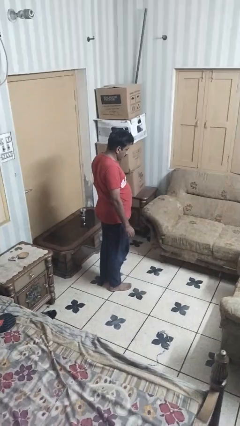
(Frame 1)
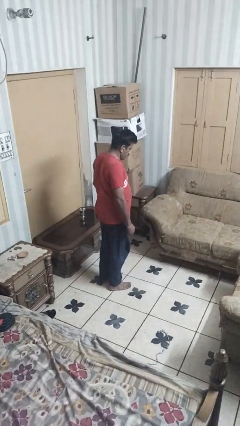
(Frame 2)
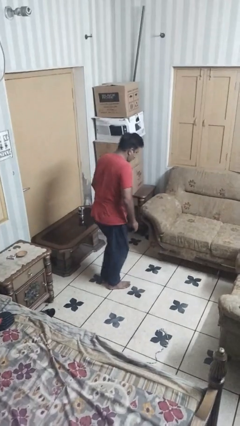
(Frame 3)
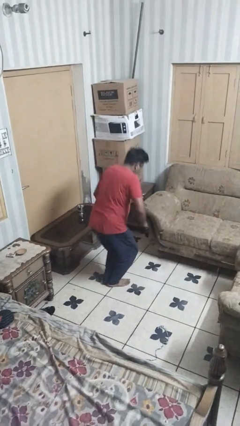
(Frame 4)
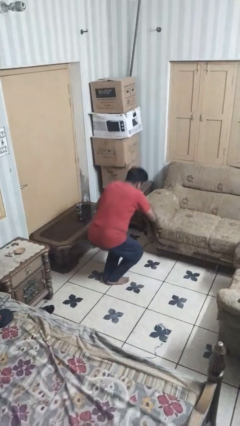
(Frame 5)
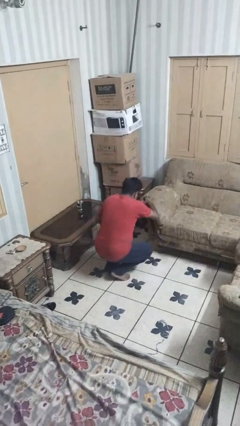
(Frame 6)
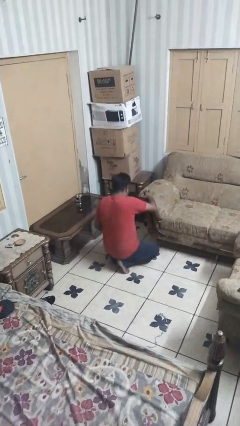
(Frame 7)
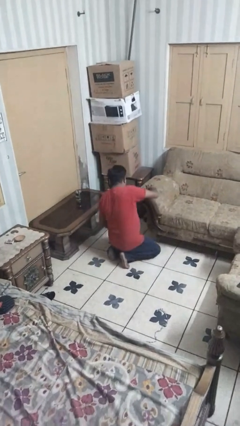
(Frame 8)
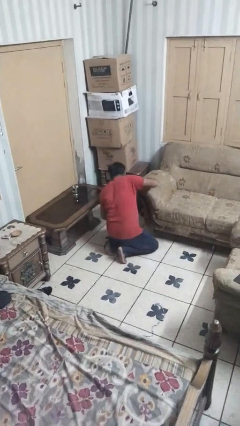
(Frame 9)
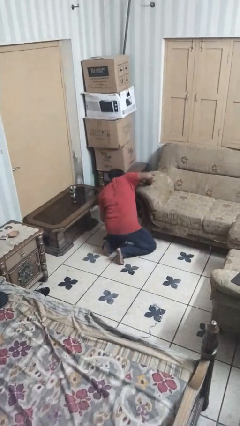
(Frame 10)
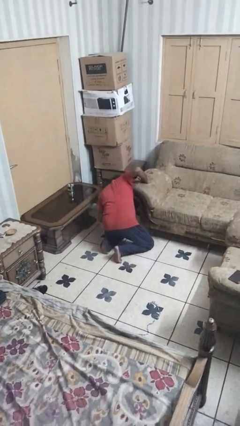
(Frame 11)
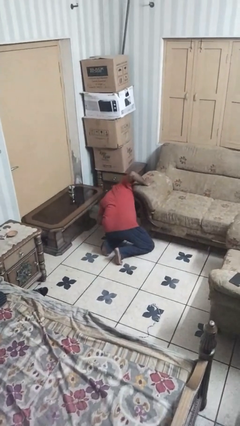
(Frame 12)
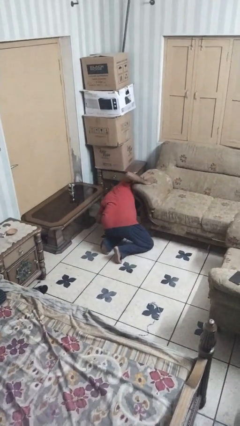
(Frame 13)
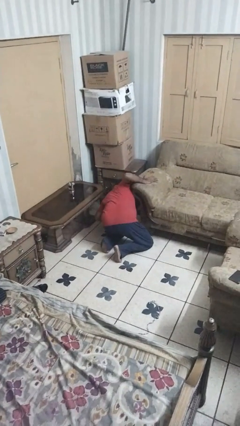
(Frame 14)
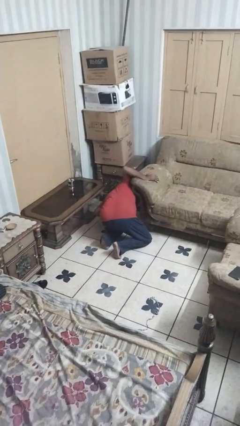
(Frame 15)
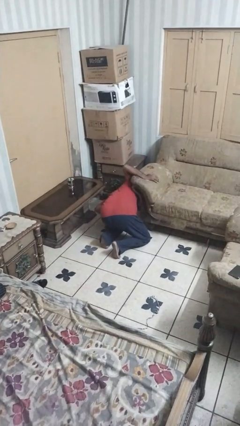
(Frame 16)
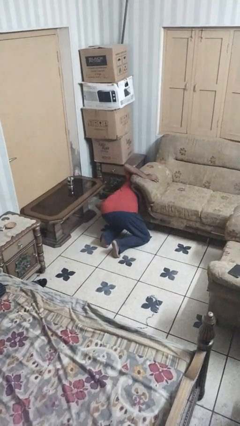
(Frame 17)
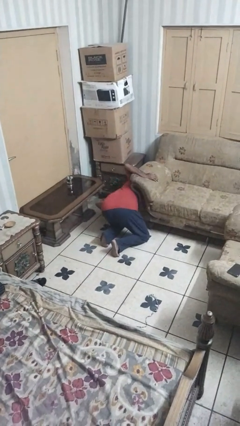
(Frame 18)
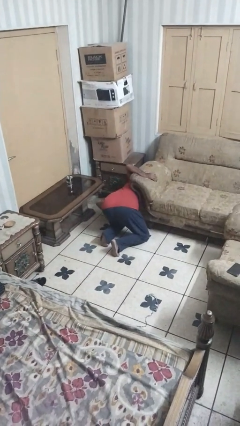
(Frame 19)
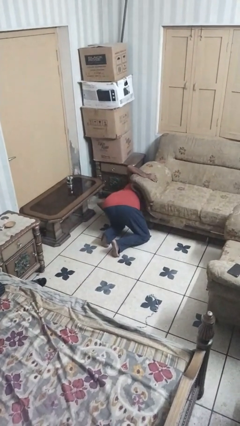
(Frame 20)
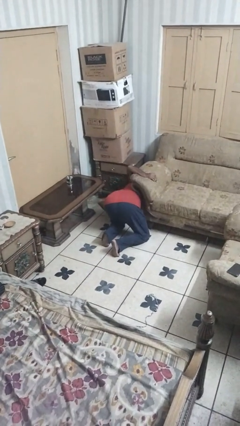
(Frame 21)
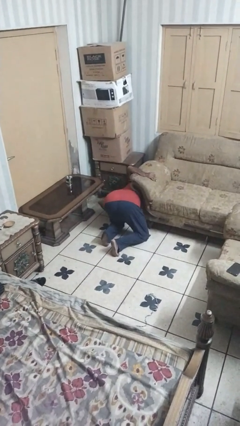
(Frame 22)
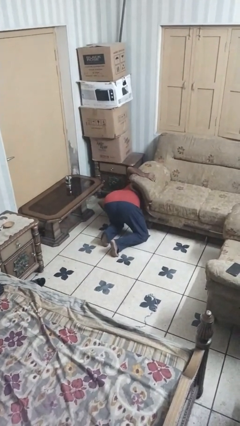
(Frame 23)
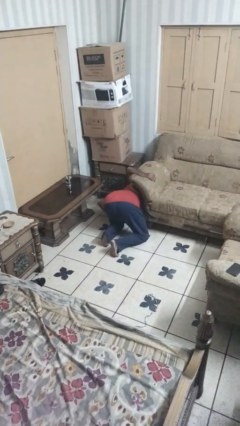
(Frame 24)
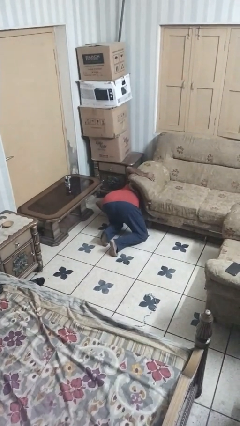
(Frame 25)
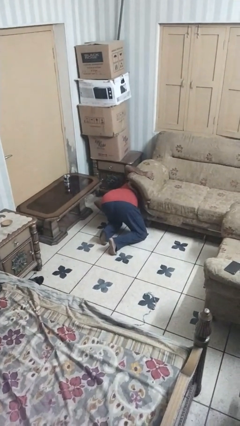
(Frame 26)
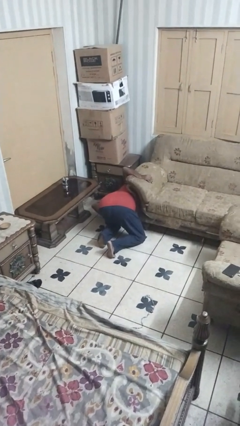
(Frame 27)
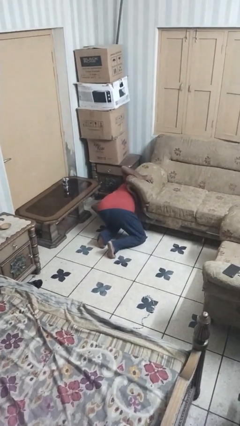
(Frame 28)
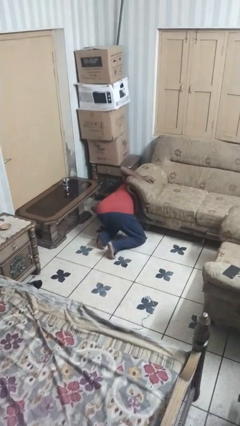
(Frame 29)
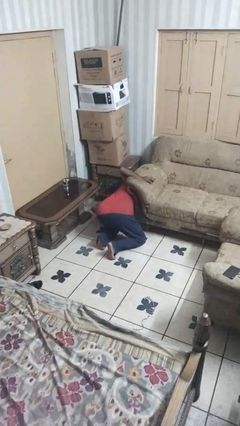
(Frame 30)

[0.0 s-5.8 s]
person searches under couch

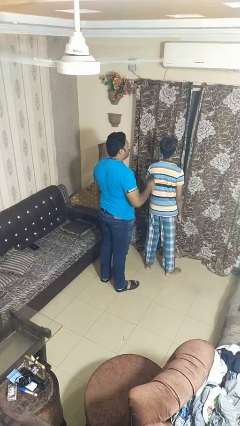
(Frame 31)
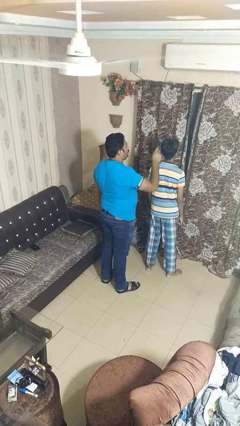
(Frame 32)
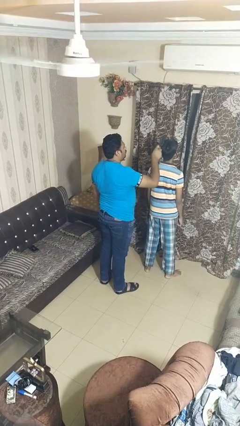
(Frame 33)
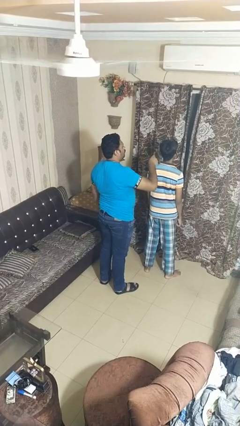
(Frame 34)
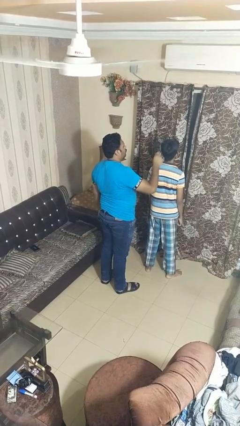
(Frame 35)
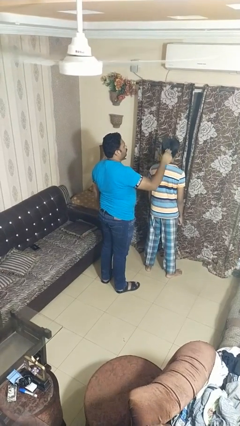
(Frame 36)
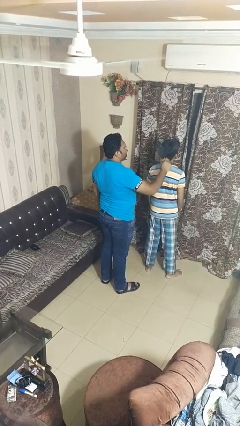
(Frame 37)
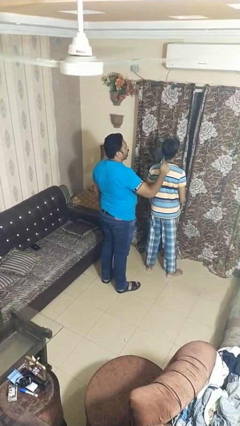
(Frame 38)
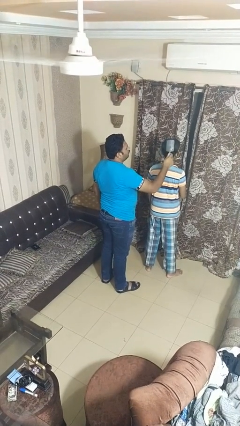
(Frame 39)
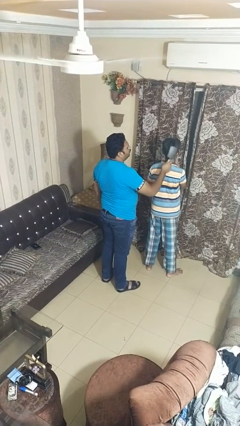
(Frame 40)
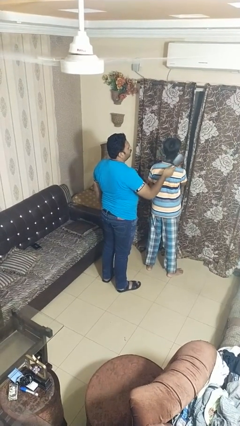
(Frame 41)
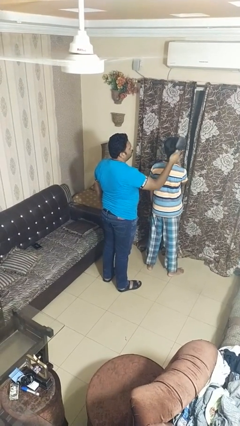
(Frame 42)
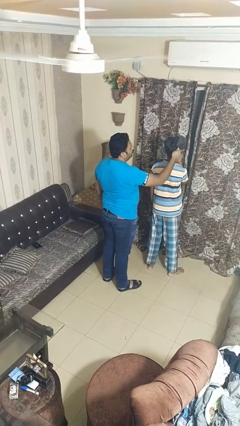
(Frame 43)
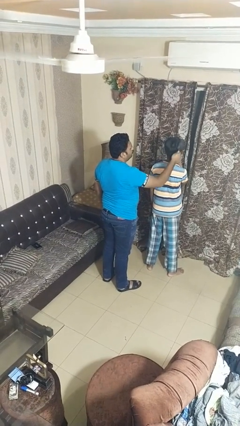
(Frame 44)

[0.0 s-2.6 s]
person brushes hair of person

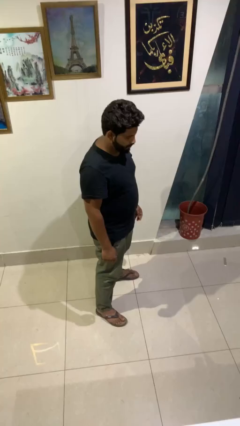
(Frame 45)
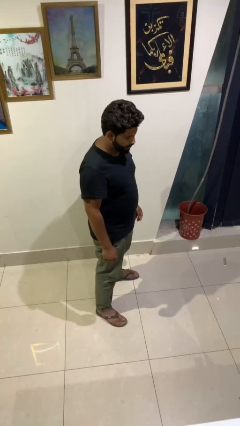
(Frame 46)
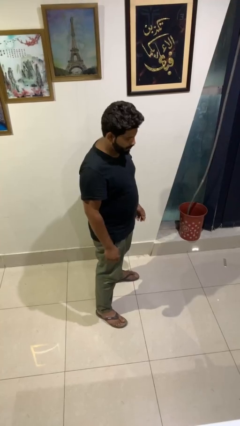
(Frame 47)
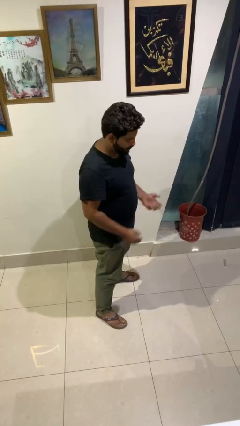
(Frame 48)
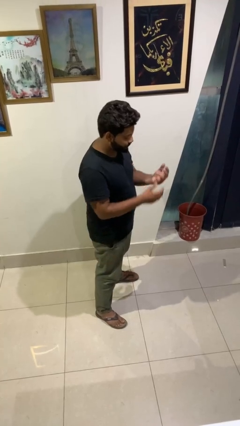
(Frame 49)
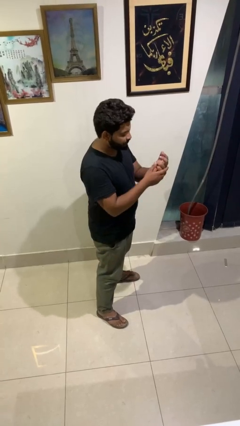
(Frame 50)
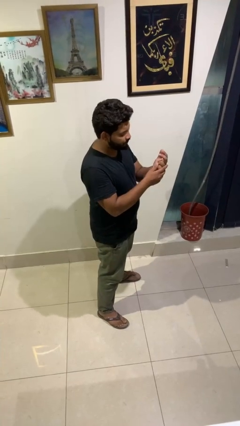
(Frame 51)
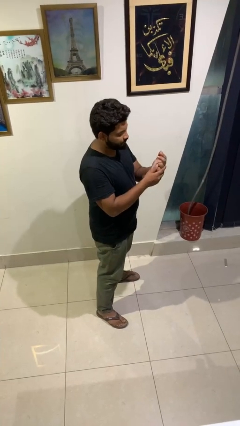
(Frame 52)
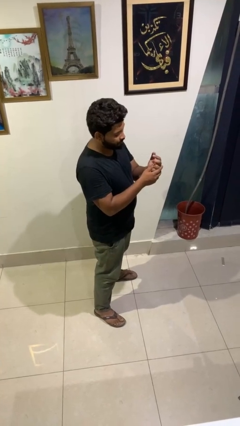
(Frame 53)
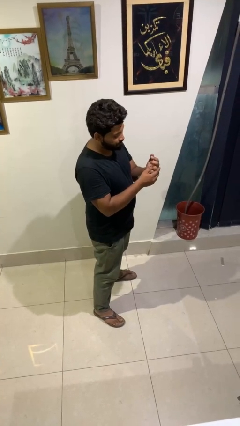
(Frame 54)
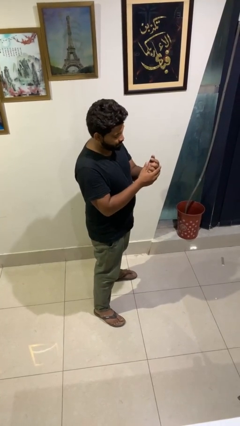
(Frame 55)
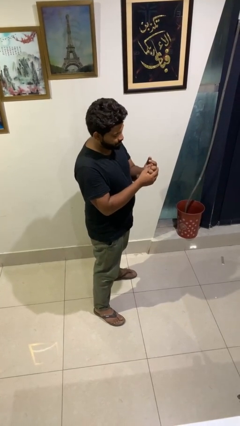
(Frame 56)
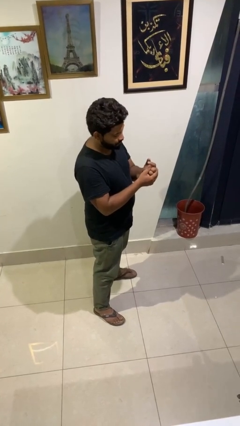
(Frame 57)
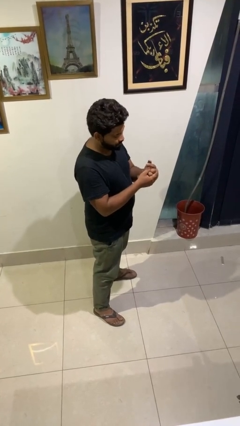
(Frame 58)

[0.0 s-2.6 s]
person cracks knuckles

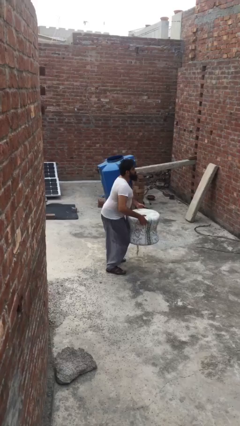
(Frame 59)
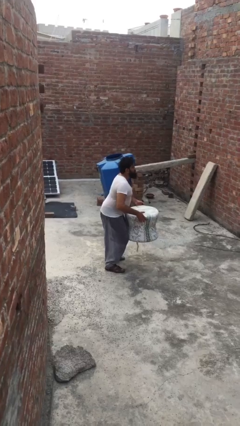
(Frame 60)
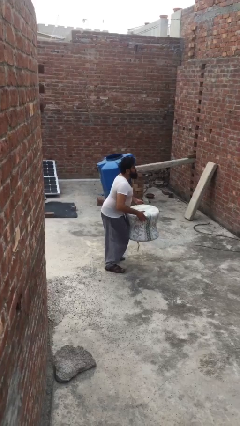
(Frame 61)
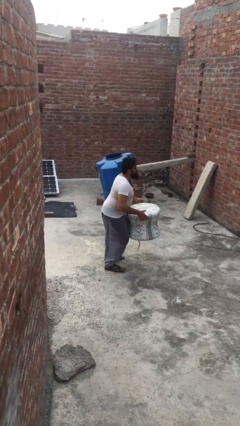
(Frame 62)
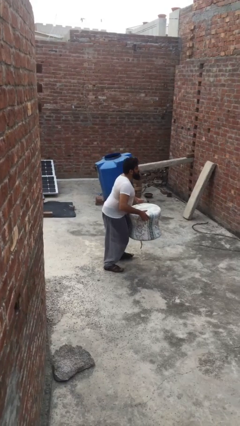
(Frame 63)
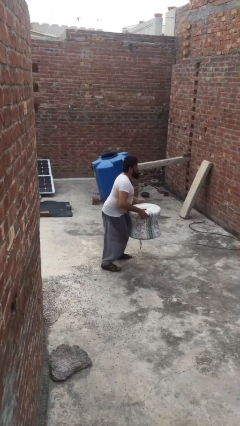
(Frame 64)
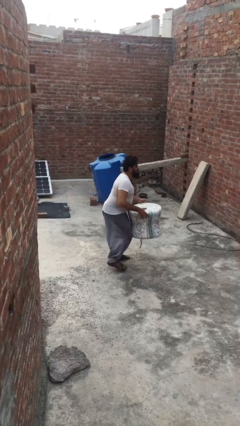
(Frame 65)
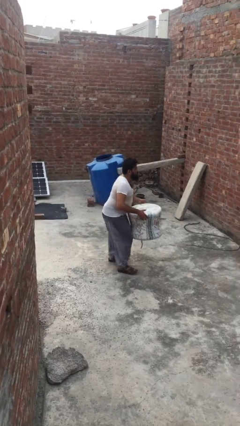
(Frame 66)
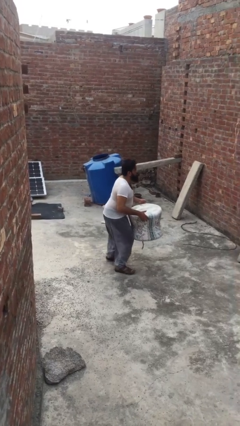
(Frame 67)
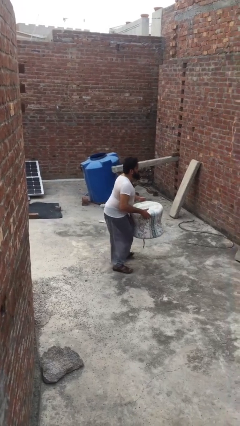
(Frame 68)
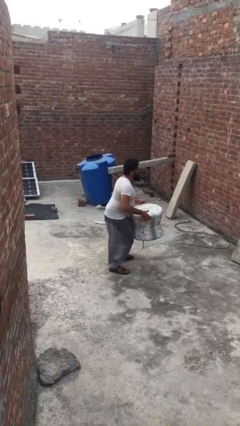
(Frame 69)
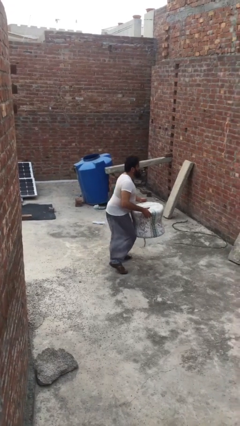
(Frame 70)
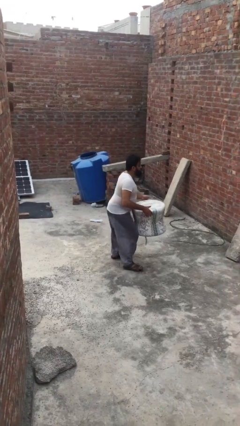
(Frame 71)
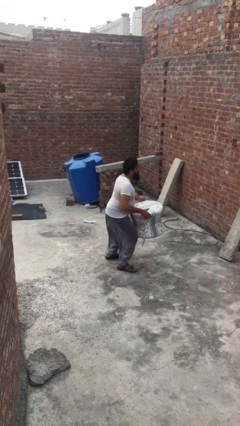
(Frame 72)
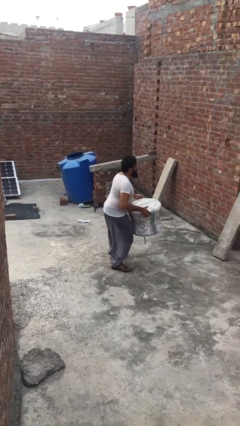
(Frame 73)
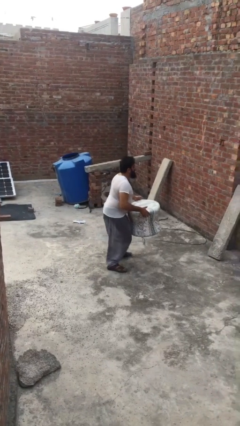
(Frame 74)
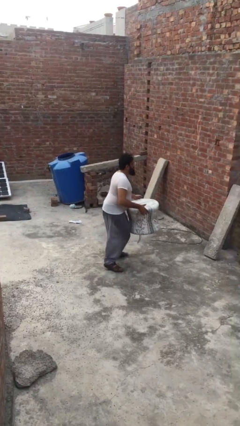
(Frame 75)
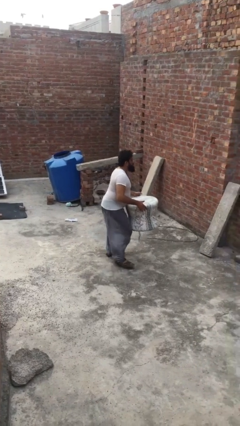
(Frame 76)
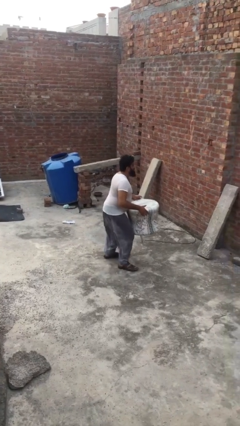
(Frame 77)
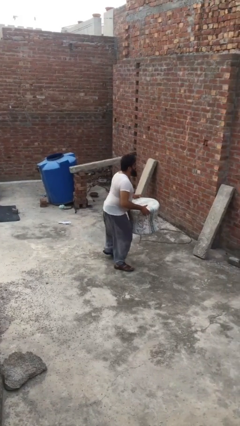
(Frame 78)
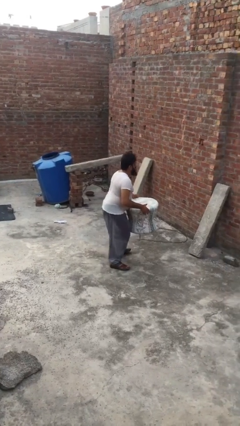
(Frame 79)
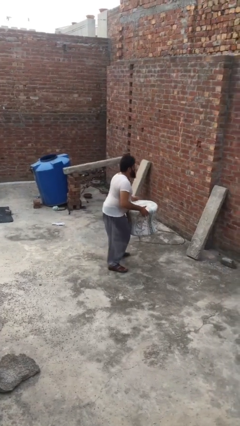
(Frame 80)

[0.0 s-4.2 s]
person carries heavy object

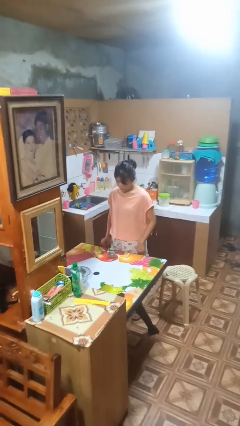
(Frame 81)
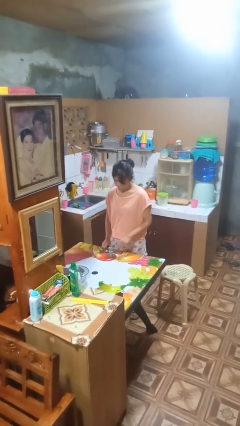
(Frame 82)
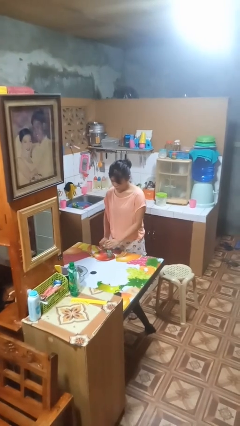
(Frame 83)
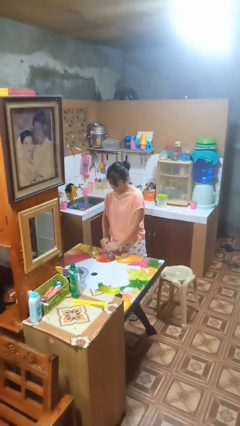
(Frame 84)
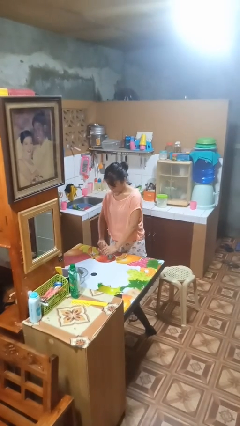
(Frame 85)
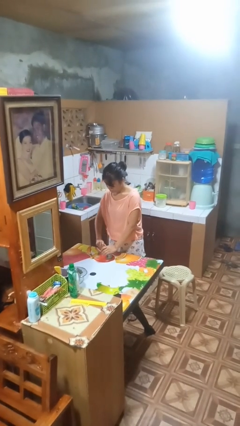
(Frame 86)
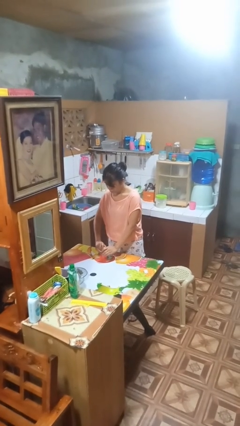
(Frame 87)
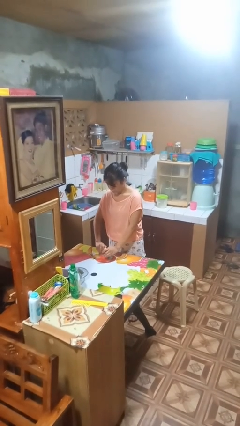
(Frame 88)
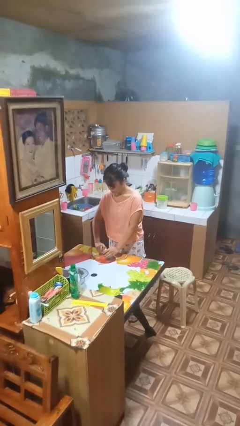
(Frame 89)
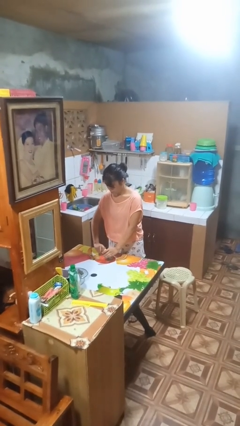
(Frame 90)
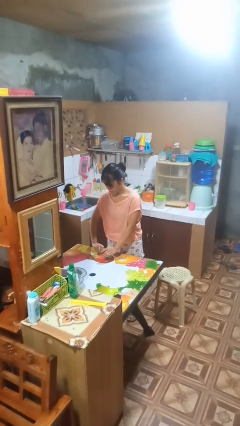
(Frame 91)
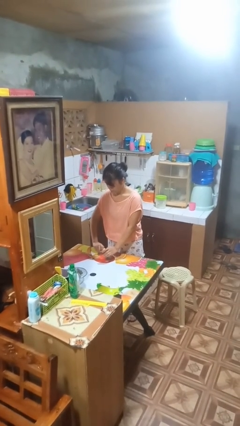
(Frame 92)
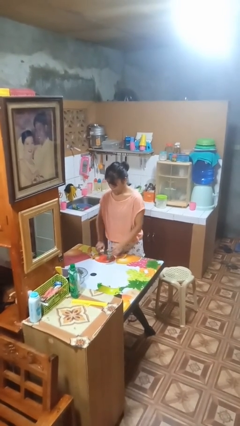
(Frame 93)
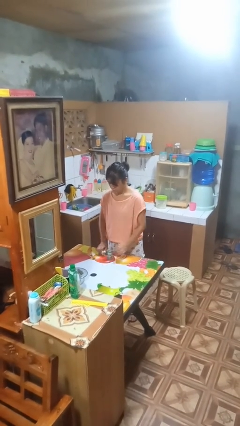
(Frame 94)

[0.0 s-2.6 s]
person opens can with can opener
